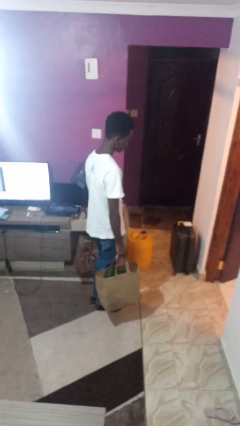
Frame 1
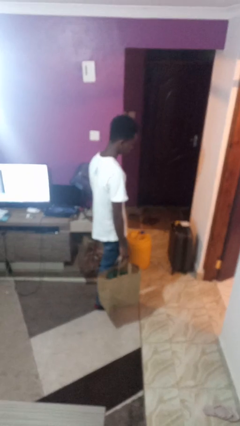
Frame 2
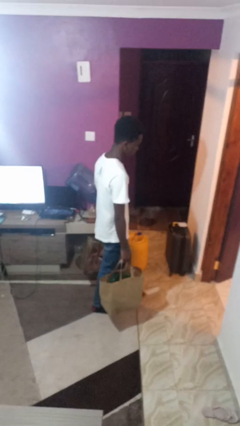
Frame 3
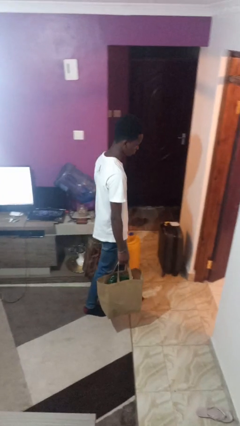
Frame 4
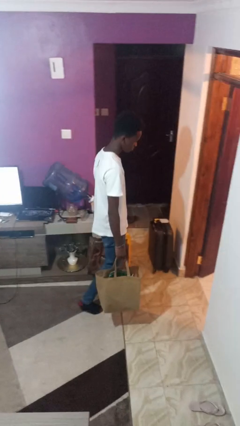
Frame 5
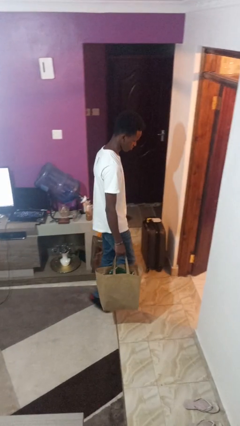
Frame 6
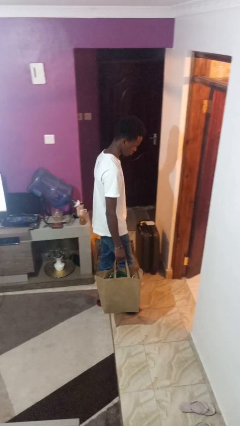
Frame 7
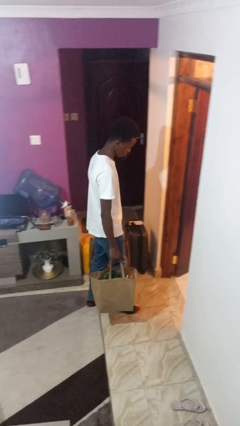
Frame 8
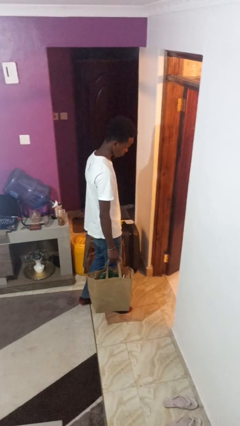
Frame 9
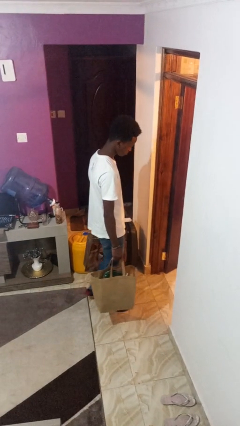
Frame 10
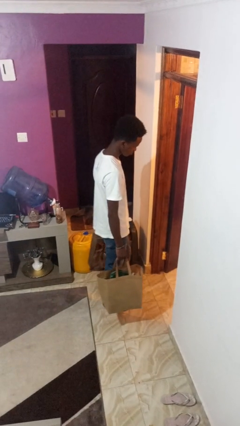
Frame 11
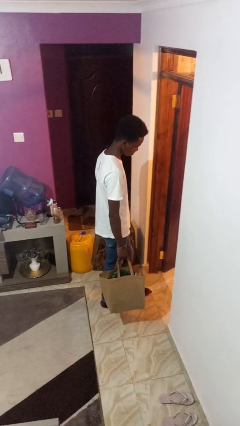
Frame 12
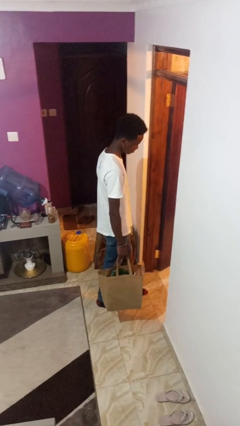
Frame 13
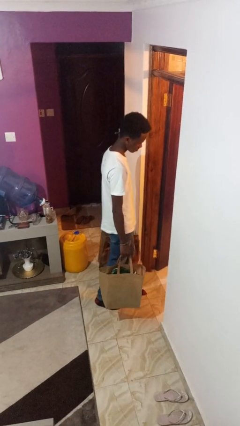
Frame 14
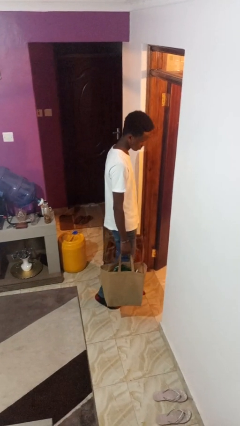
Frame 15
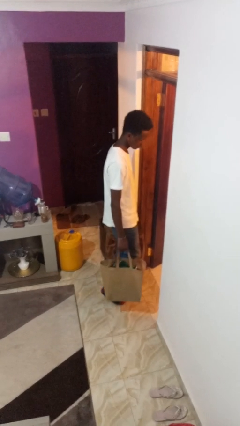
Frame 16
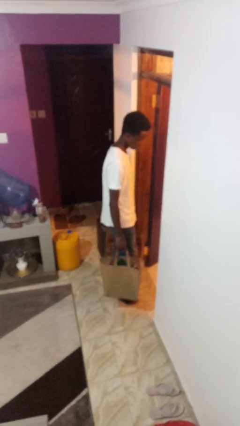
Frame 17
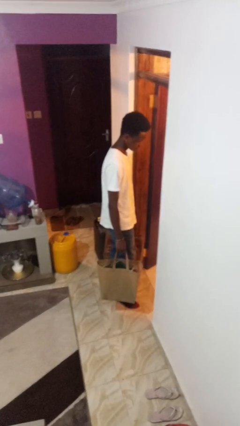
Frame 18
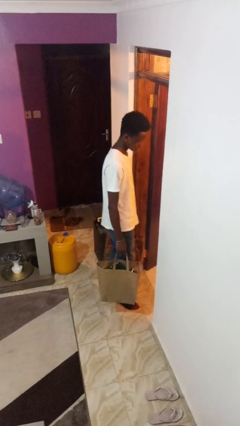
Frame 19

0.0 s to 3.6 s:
person carries groceries

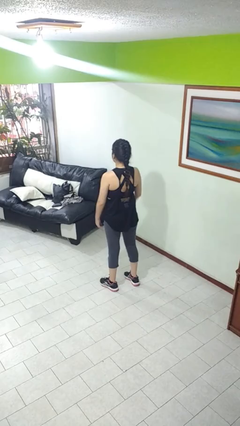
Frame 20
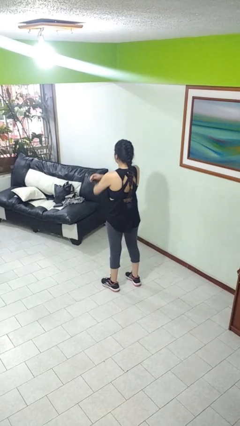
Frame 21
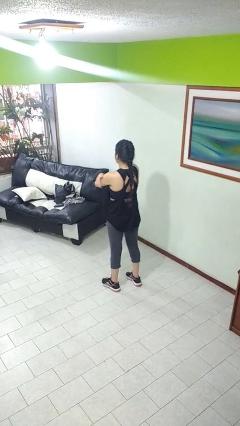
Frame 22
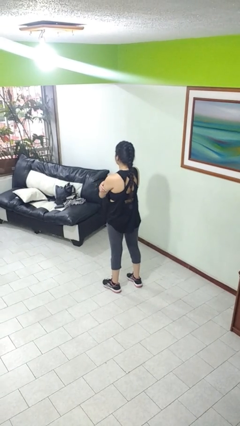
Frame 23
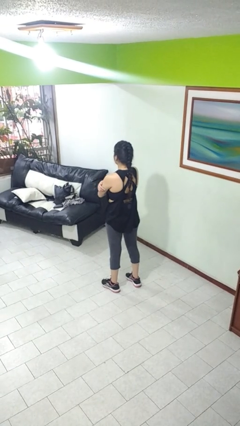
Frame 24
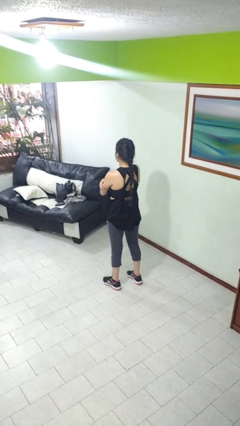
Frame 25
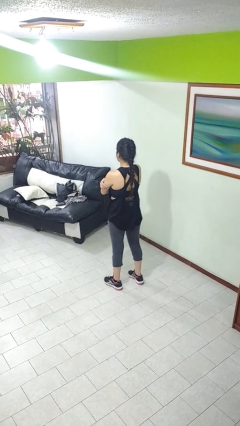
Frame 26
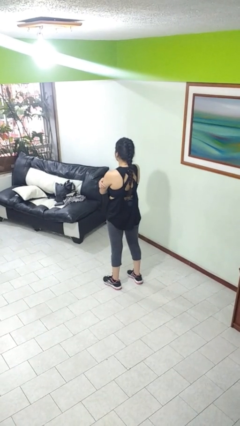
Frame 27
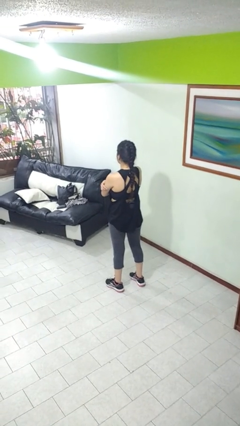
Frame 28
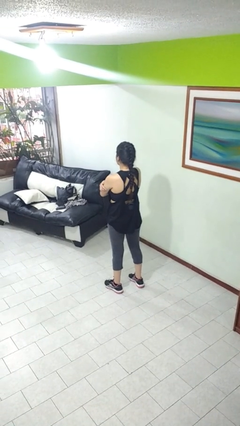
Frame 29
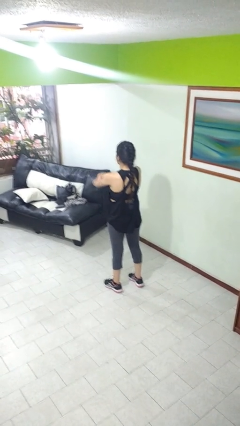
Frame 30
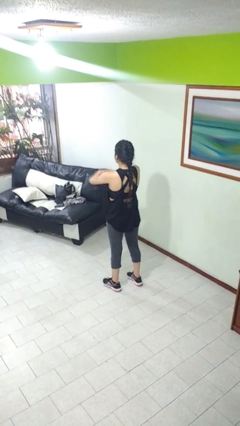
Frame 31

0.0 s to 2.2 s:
person crosses arms

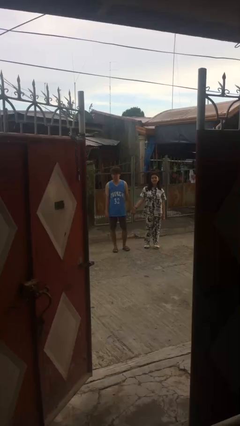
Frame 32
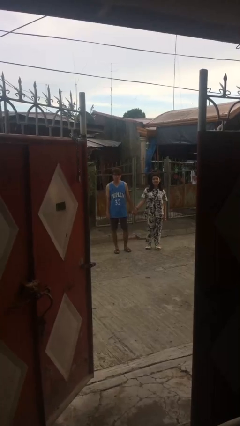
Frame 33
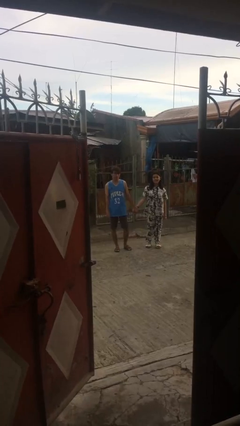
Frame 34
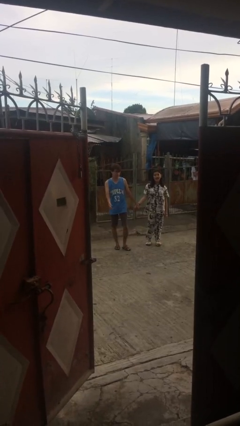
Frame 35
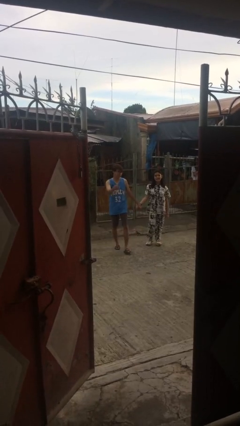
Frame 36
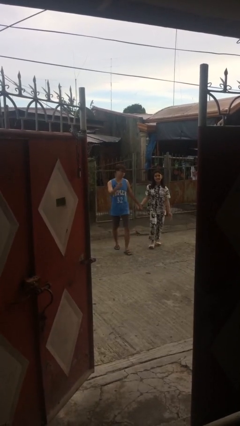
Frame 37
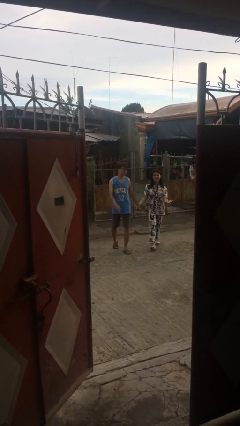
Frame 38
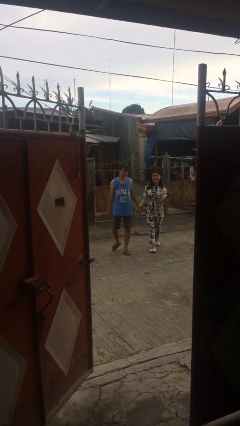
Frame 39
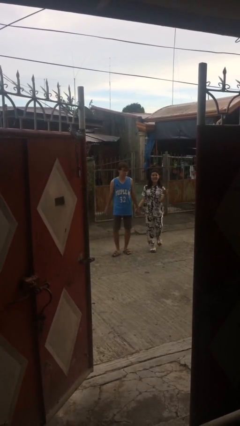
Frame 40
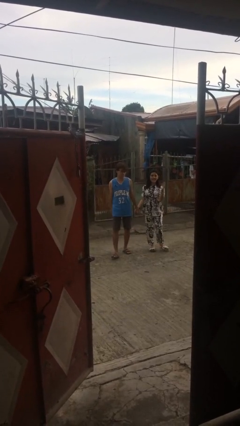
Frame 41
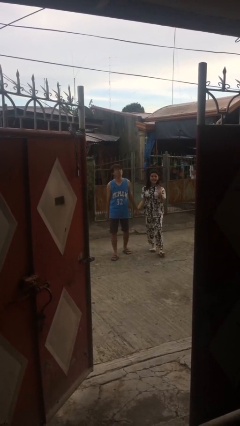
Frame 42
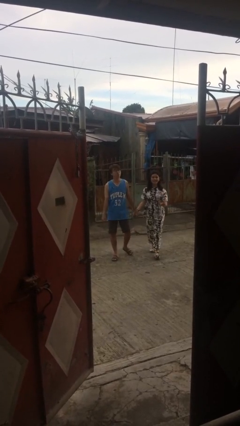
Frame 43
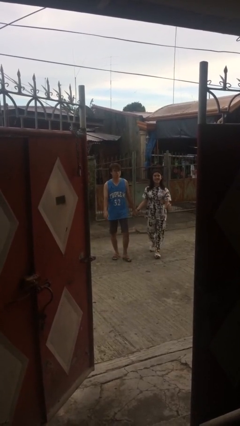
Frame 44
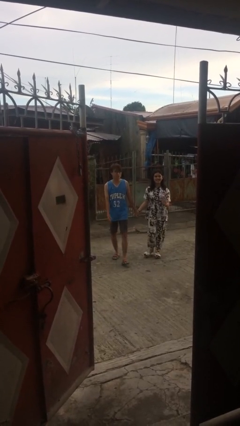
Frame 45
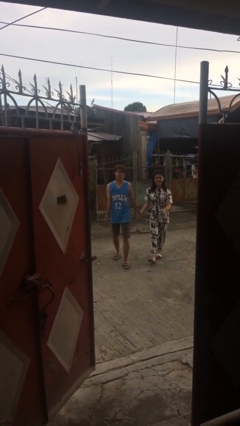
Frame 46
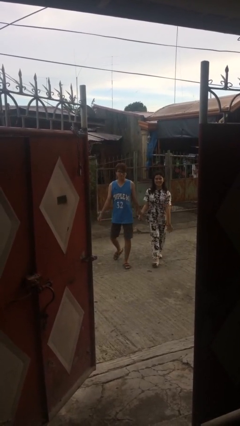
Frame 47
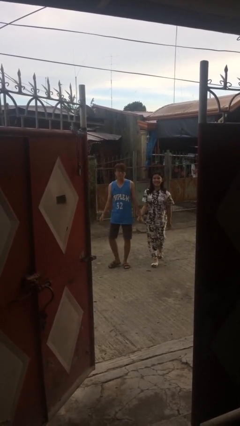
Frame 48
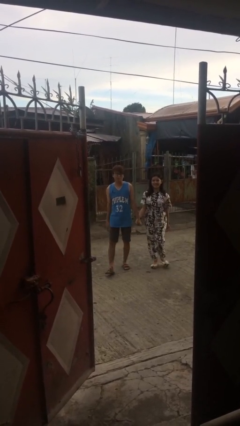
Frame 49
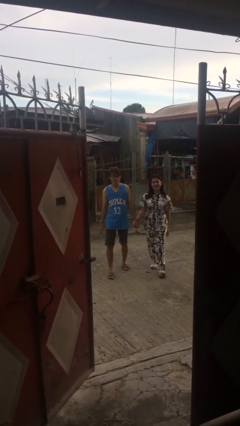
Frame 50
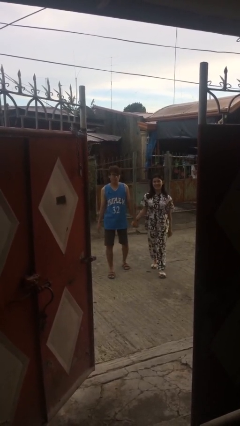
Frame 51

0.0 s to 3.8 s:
person holds hand

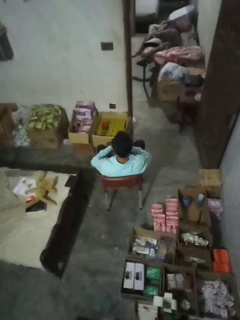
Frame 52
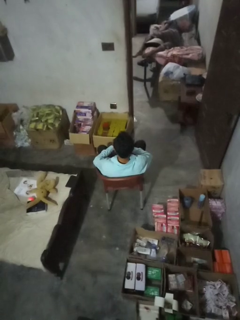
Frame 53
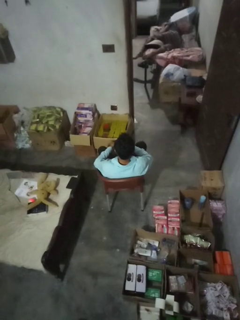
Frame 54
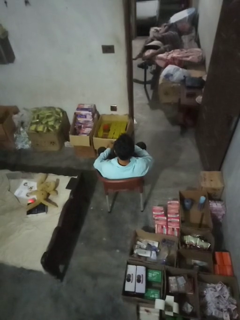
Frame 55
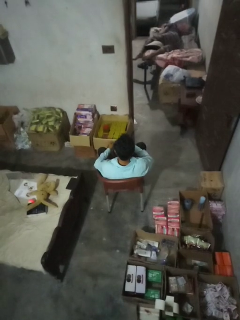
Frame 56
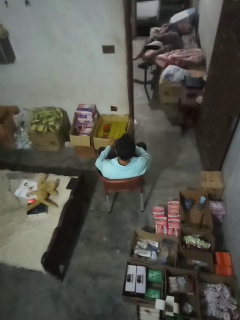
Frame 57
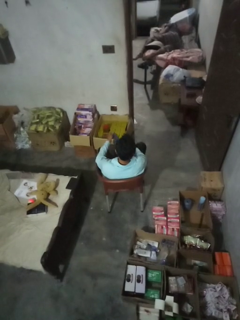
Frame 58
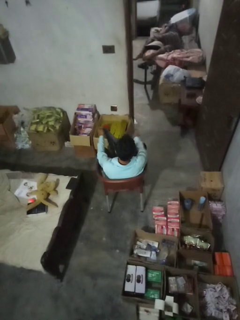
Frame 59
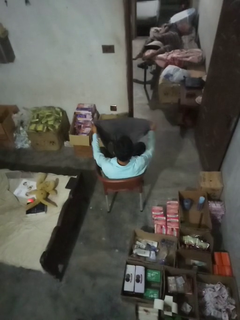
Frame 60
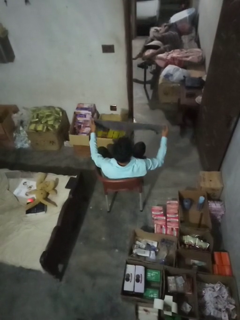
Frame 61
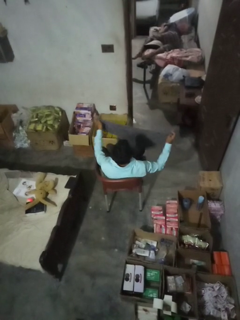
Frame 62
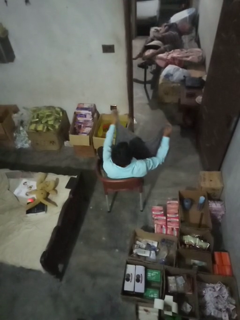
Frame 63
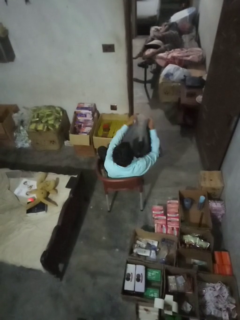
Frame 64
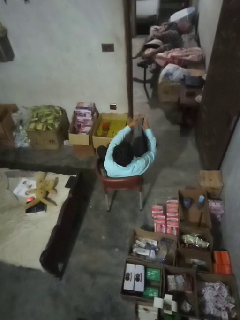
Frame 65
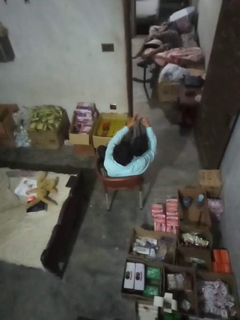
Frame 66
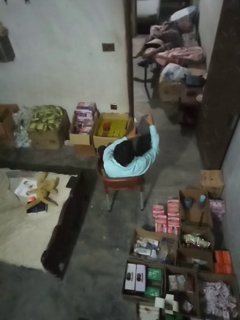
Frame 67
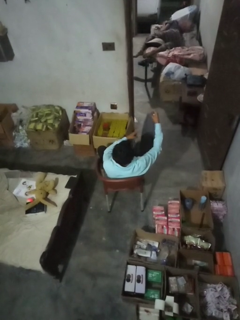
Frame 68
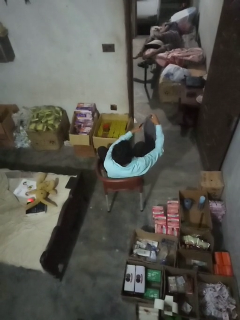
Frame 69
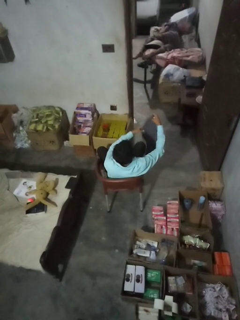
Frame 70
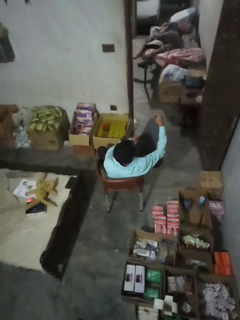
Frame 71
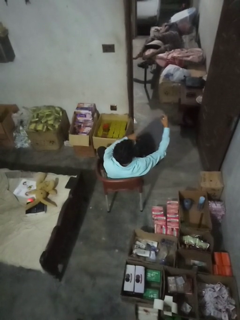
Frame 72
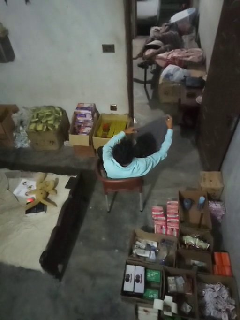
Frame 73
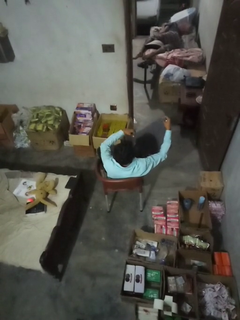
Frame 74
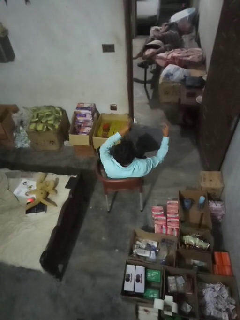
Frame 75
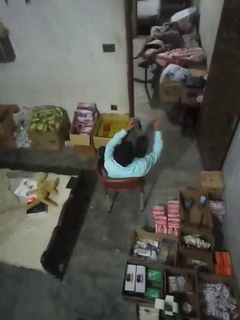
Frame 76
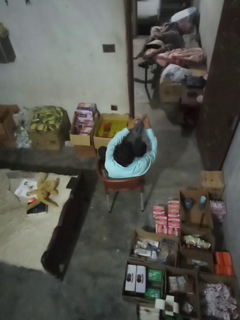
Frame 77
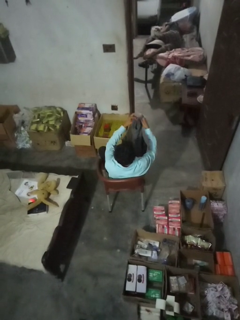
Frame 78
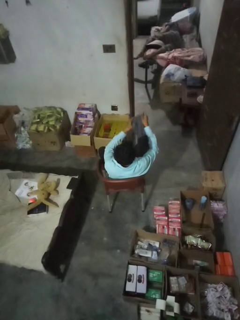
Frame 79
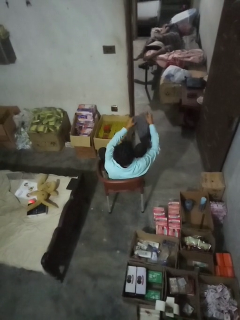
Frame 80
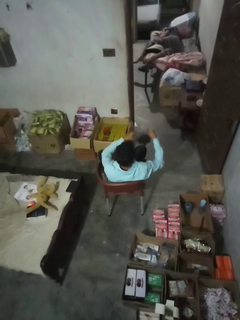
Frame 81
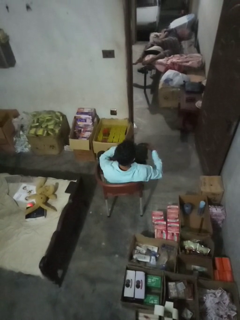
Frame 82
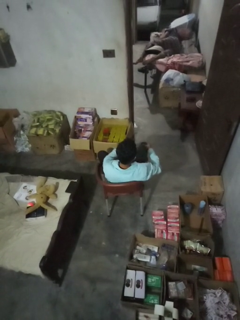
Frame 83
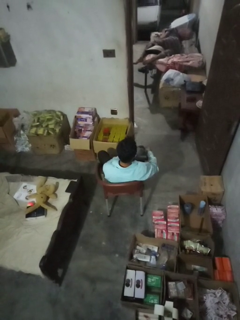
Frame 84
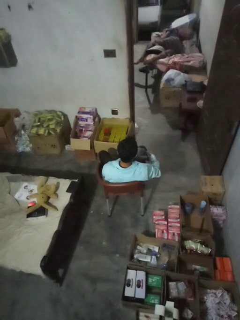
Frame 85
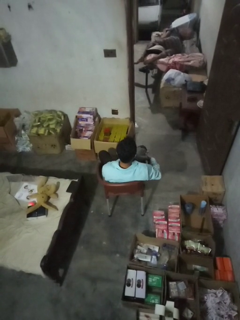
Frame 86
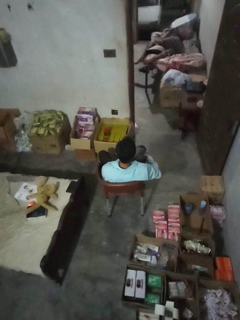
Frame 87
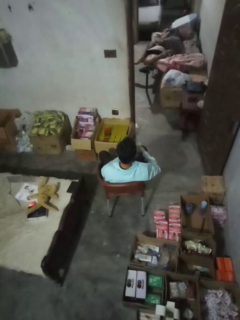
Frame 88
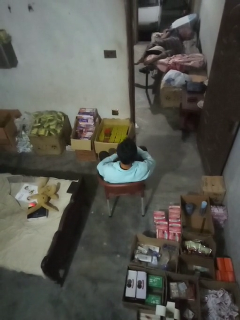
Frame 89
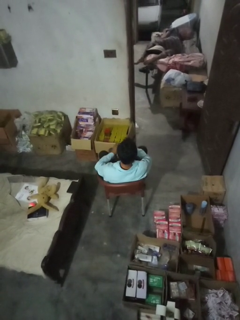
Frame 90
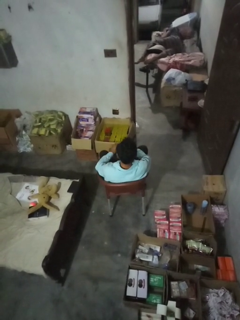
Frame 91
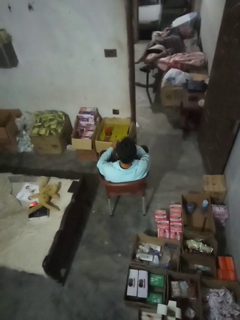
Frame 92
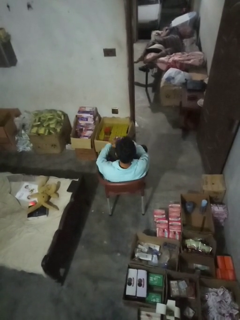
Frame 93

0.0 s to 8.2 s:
person folds towel

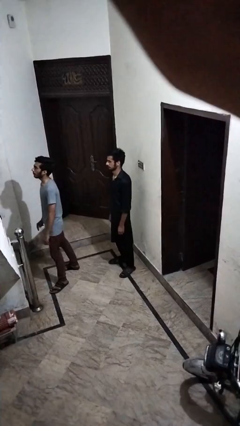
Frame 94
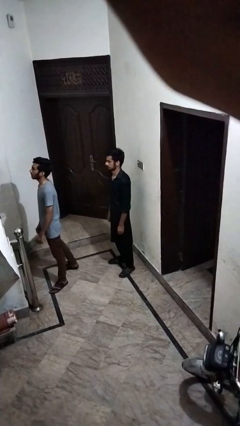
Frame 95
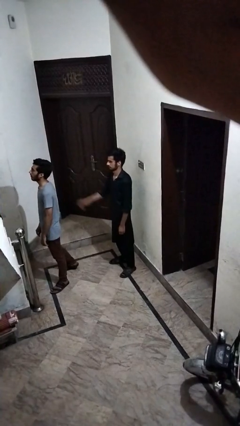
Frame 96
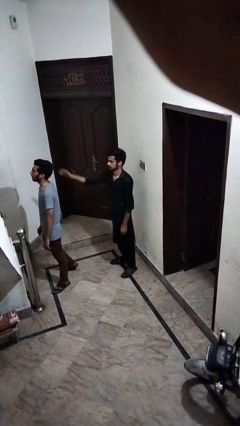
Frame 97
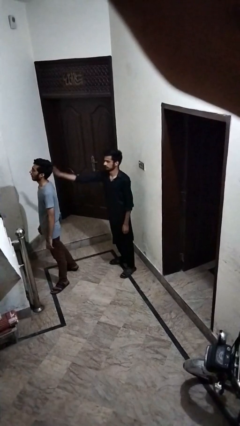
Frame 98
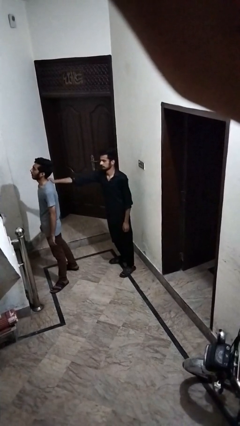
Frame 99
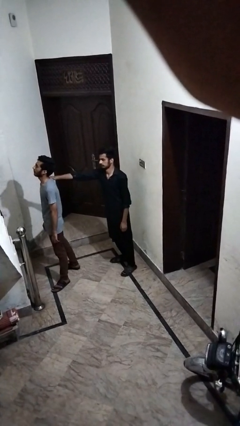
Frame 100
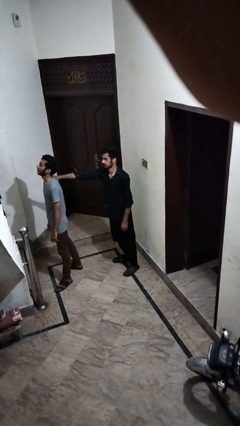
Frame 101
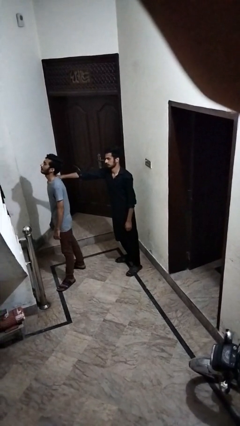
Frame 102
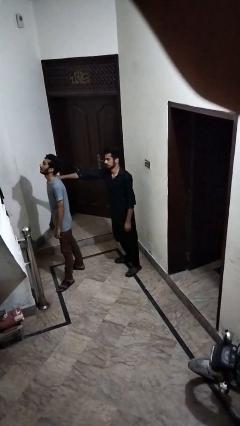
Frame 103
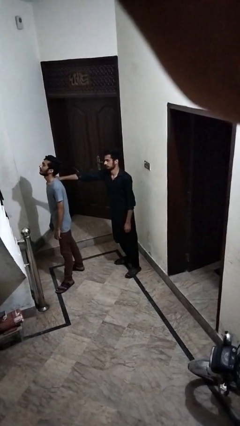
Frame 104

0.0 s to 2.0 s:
person grabs person by shoulder
